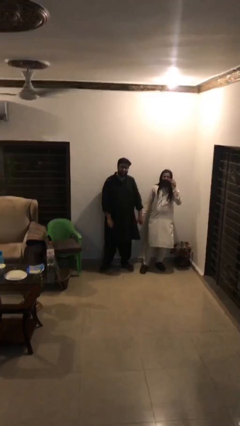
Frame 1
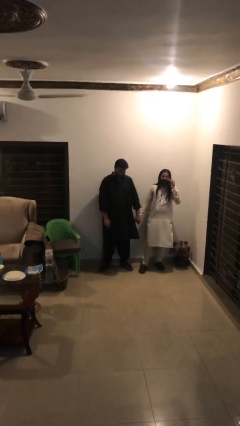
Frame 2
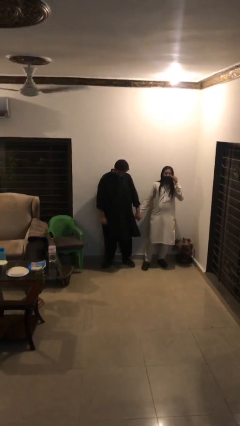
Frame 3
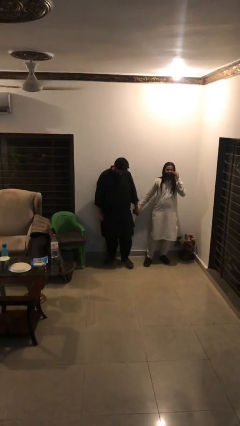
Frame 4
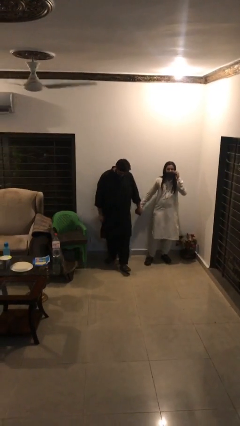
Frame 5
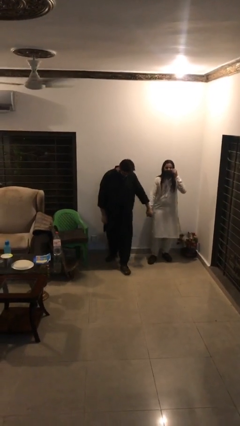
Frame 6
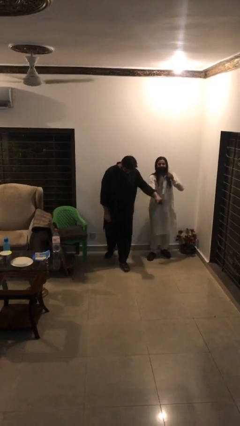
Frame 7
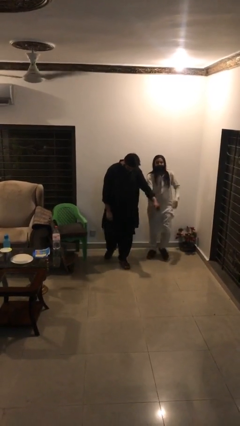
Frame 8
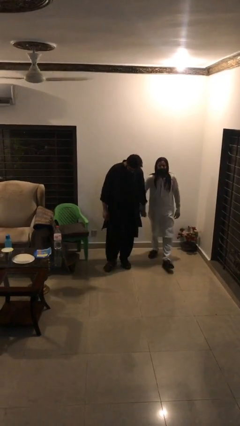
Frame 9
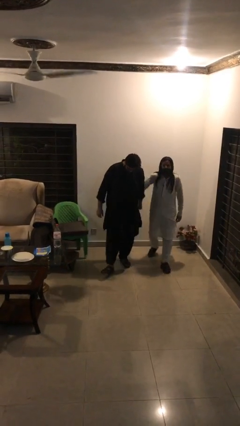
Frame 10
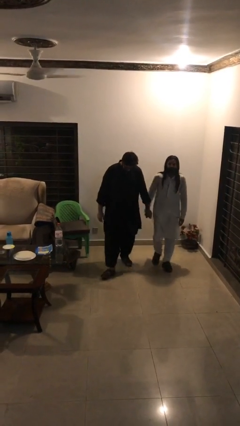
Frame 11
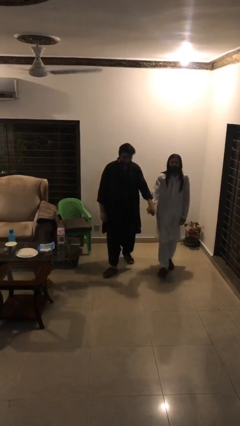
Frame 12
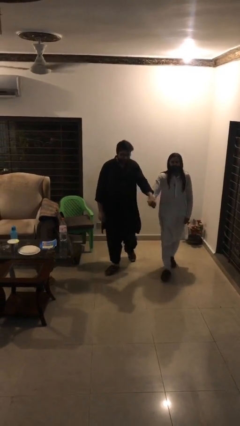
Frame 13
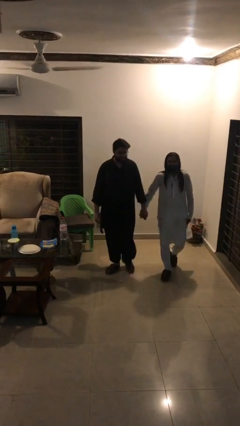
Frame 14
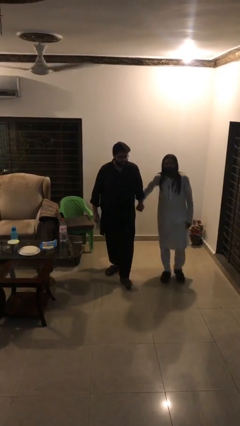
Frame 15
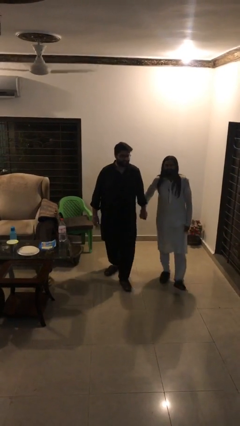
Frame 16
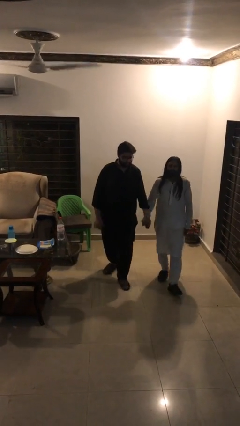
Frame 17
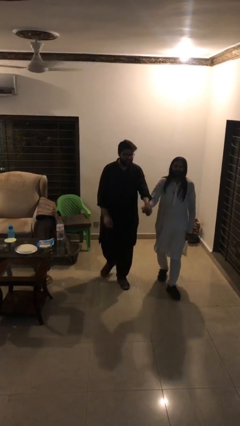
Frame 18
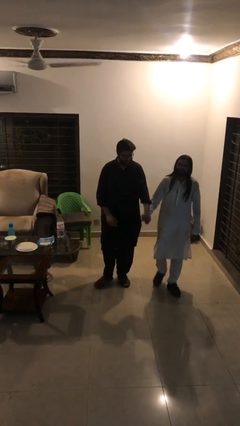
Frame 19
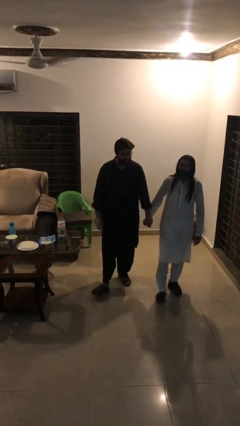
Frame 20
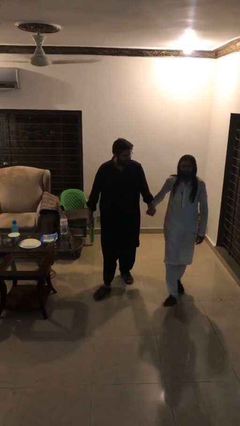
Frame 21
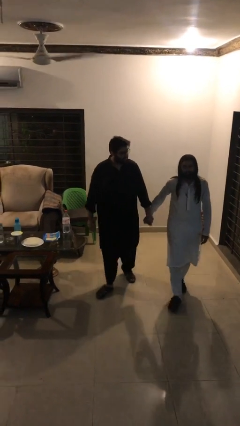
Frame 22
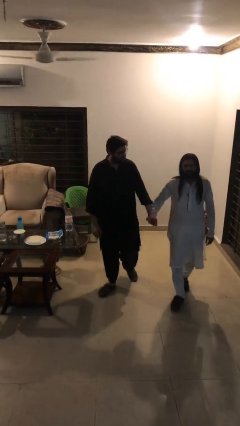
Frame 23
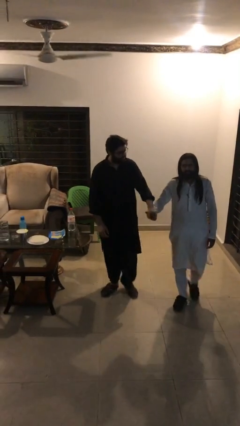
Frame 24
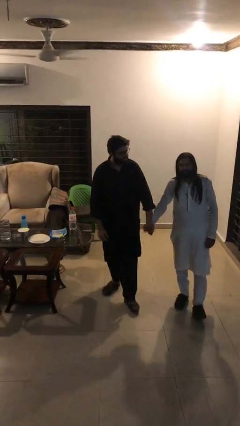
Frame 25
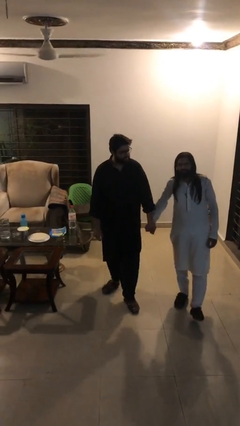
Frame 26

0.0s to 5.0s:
person holds hand

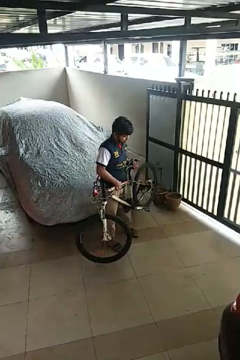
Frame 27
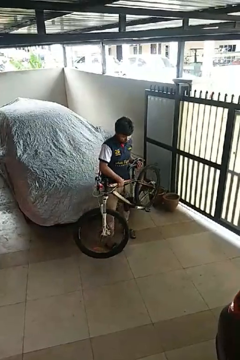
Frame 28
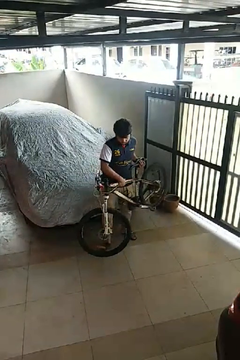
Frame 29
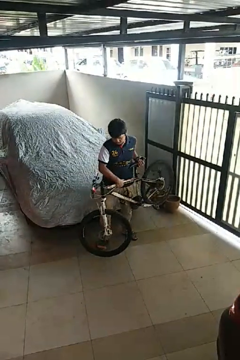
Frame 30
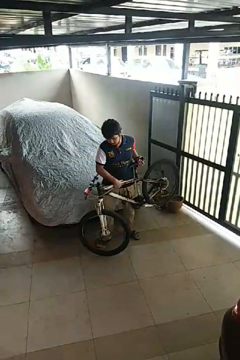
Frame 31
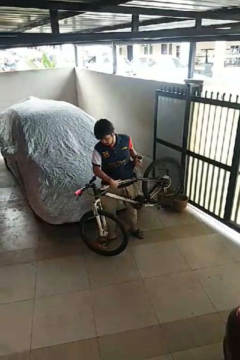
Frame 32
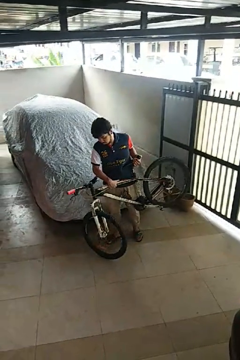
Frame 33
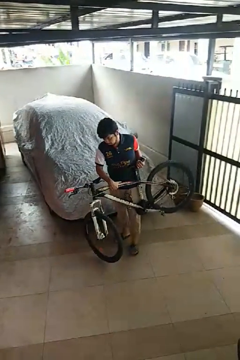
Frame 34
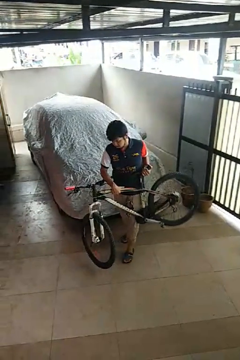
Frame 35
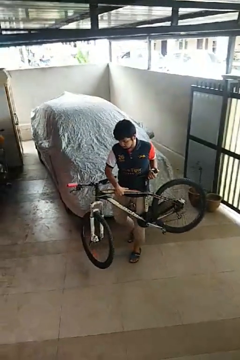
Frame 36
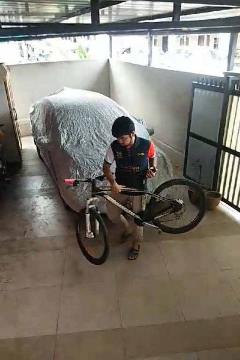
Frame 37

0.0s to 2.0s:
person carries bicycle

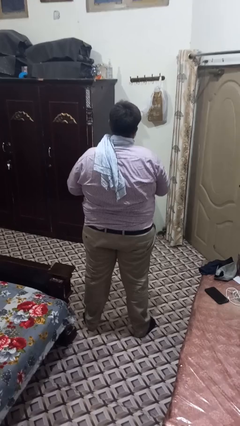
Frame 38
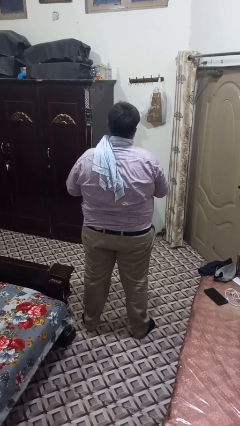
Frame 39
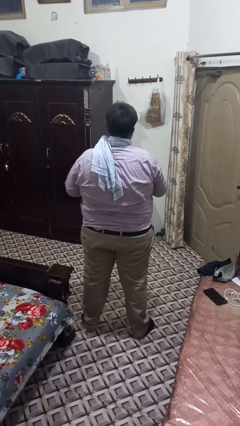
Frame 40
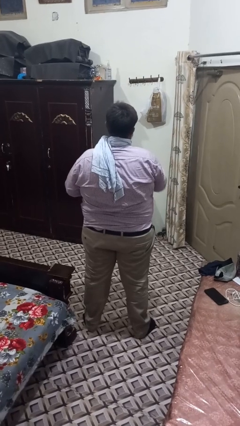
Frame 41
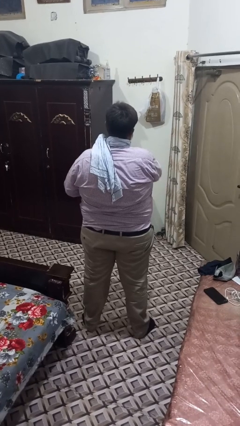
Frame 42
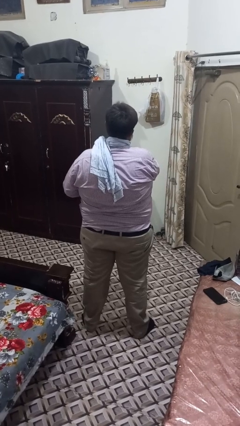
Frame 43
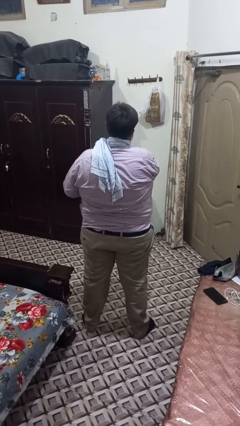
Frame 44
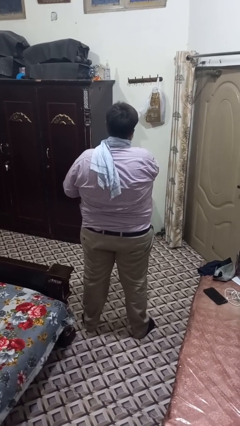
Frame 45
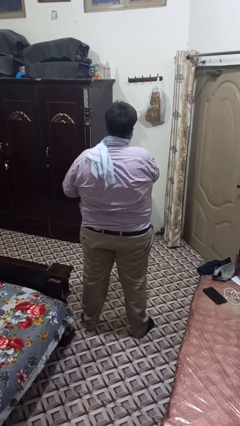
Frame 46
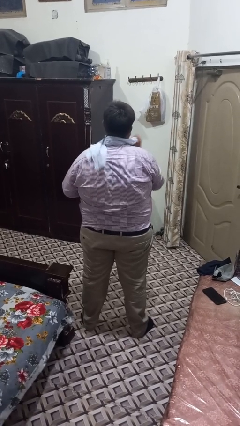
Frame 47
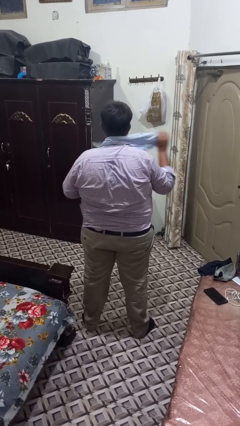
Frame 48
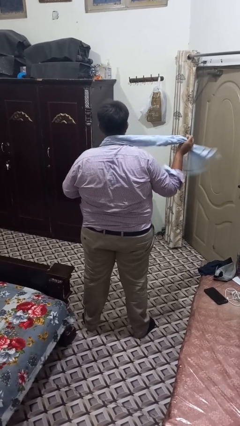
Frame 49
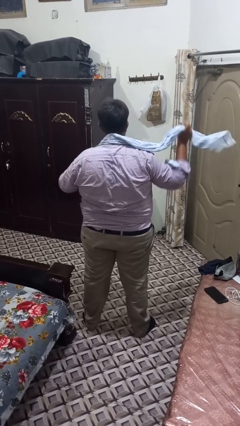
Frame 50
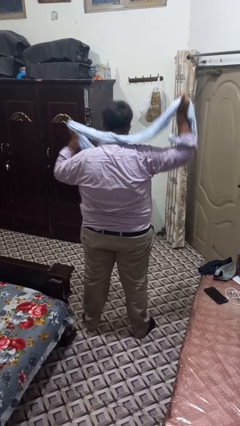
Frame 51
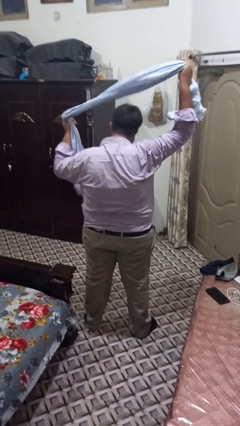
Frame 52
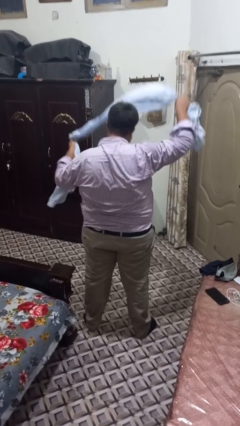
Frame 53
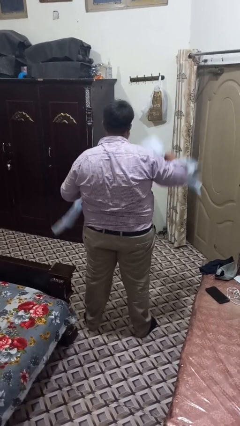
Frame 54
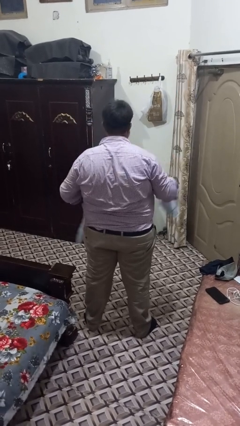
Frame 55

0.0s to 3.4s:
person takes off scarf

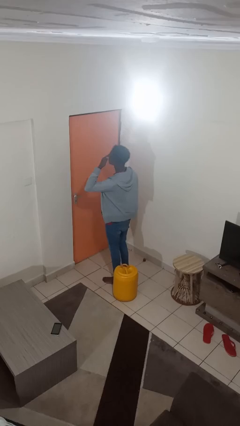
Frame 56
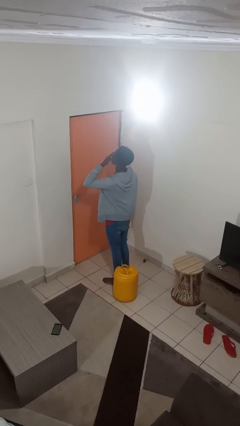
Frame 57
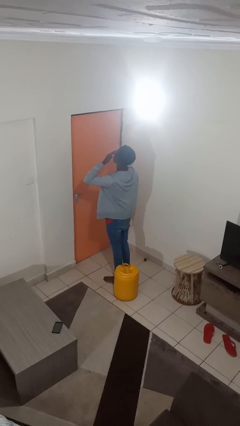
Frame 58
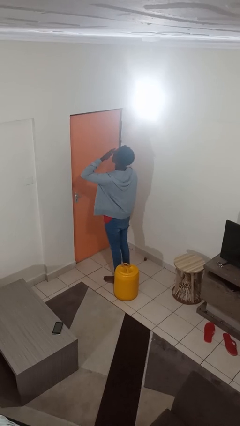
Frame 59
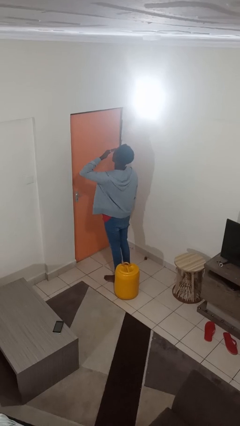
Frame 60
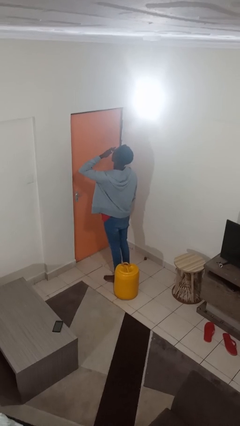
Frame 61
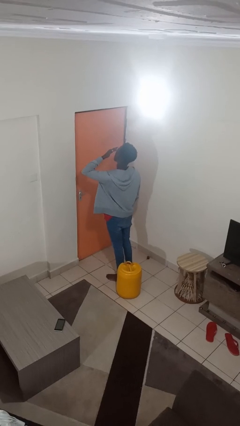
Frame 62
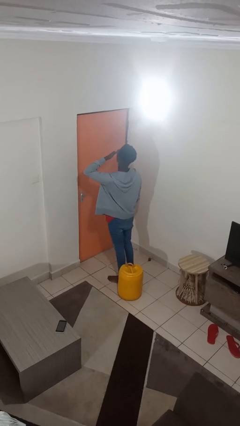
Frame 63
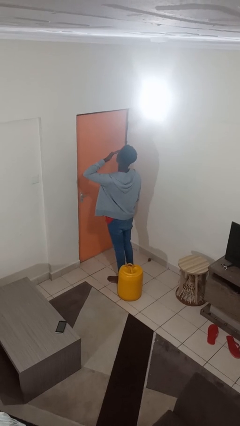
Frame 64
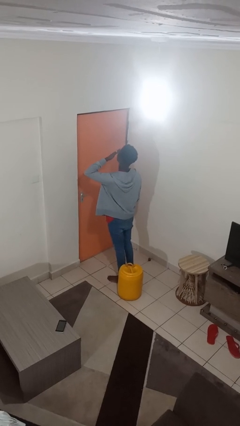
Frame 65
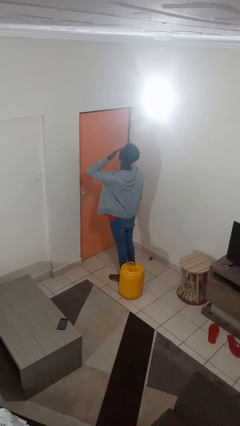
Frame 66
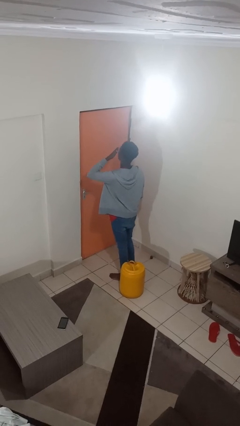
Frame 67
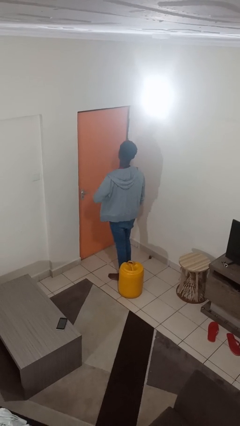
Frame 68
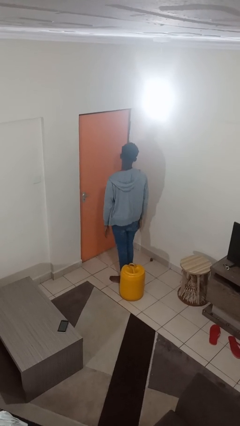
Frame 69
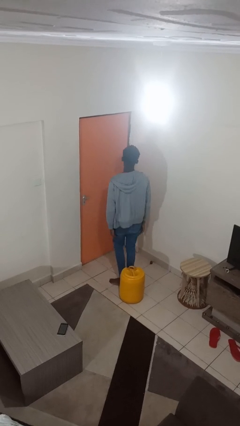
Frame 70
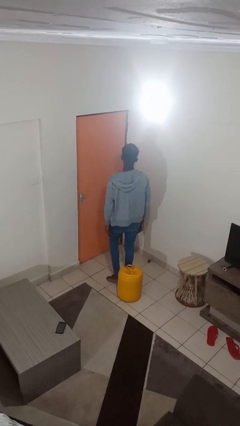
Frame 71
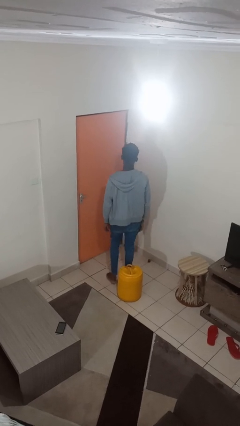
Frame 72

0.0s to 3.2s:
person rubs eyes

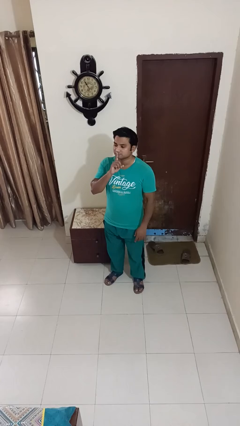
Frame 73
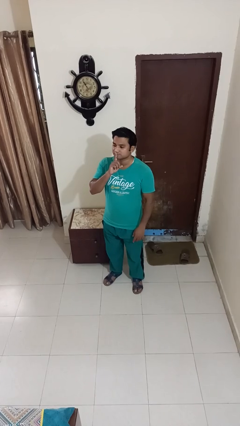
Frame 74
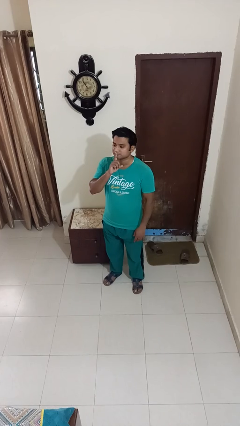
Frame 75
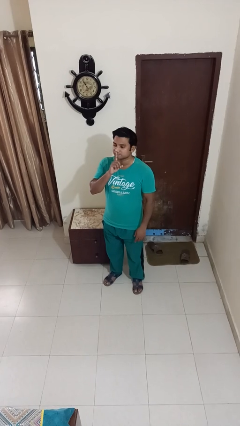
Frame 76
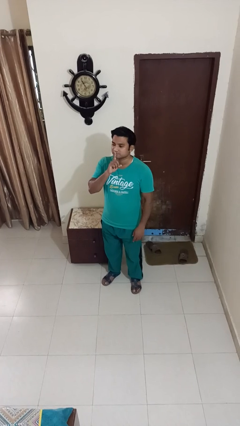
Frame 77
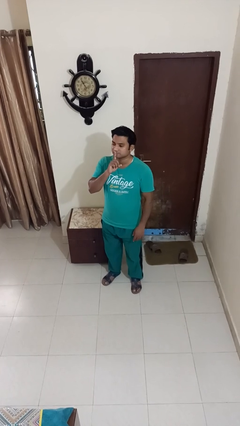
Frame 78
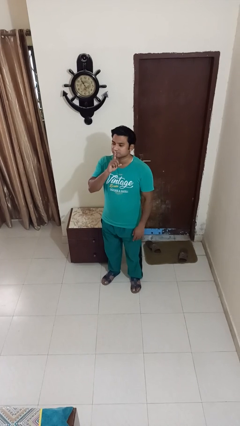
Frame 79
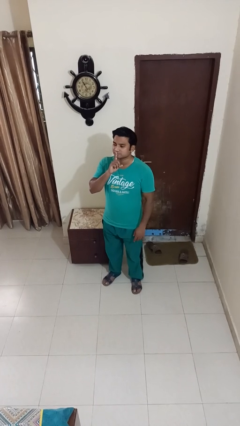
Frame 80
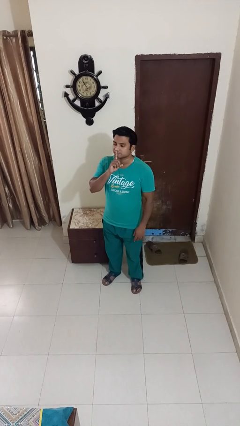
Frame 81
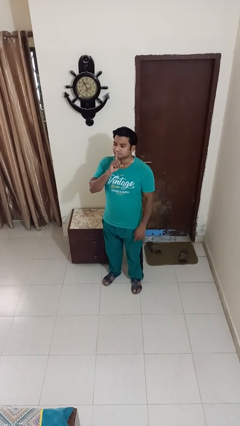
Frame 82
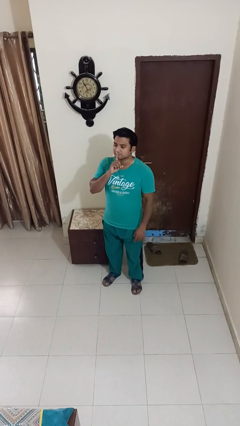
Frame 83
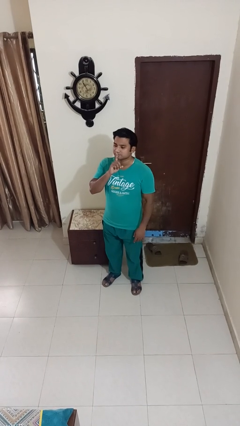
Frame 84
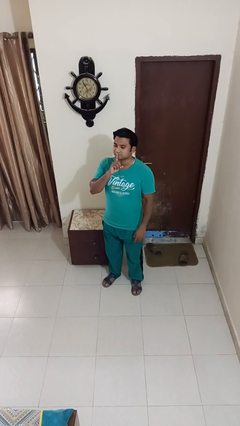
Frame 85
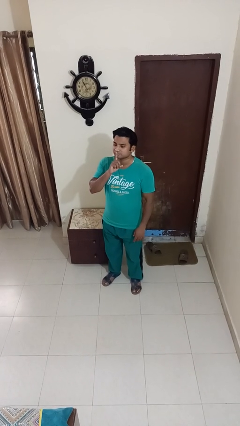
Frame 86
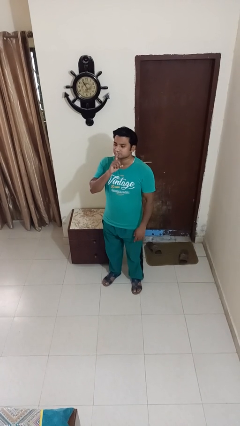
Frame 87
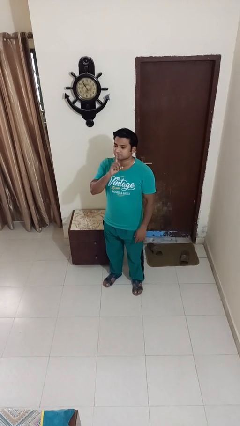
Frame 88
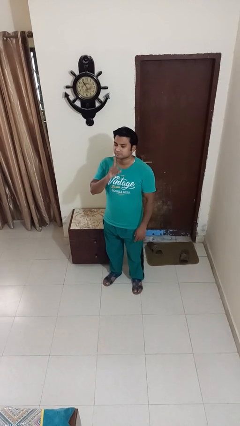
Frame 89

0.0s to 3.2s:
person gestures be quiet

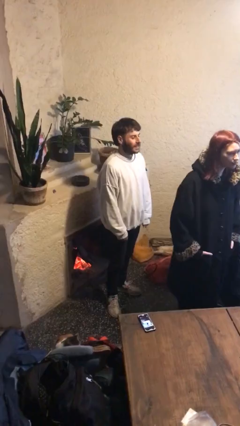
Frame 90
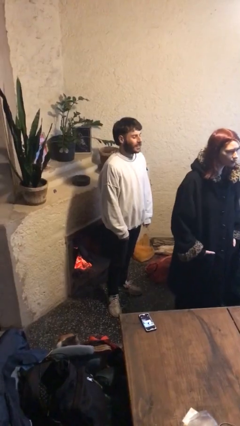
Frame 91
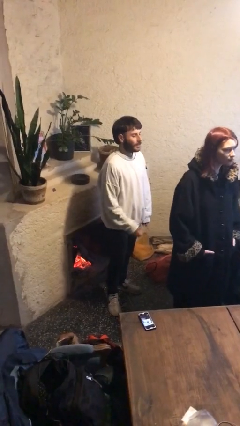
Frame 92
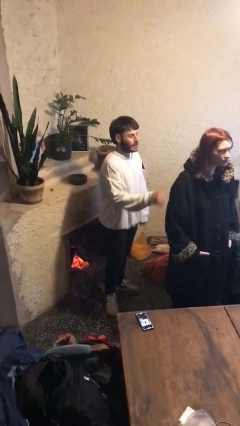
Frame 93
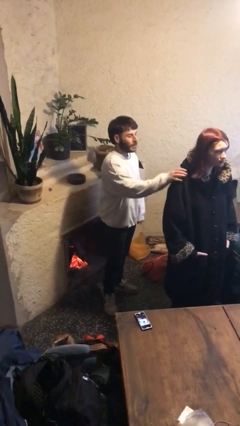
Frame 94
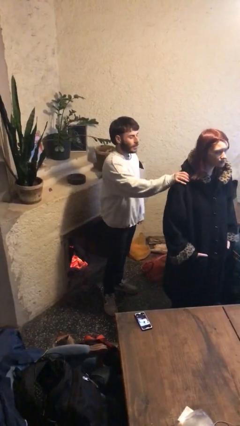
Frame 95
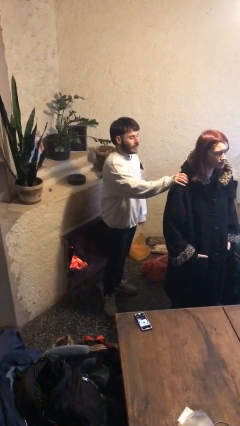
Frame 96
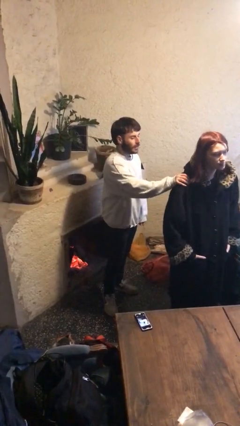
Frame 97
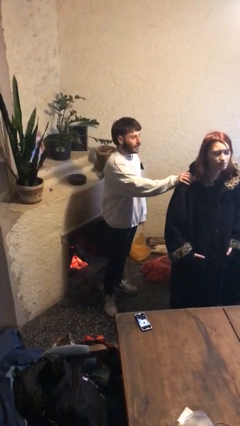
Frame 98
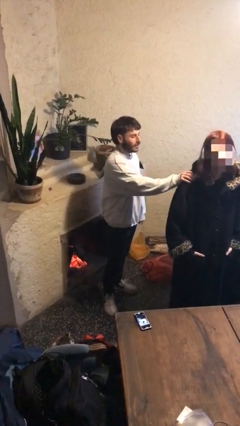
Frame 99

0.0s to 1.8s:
person grabs person by shoulder
